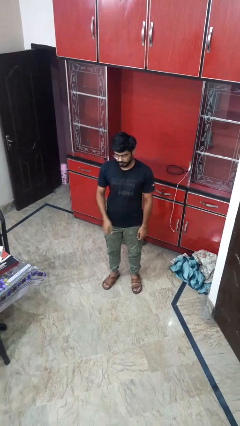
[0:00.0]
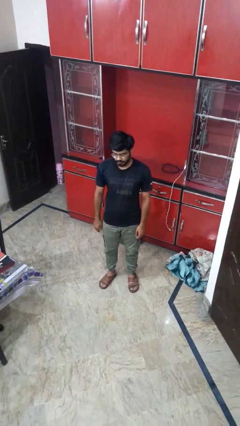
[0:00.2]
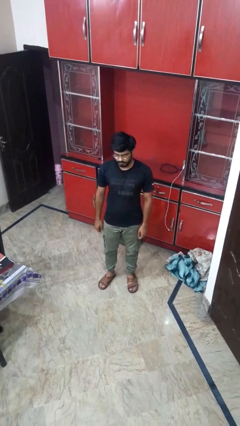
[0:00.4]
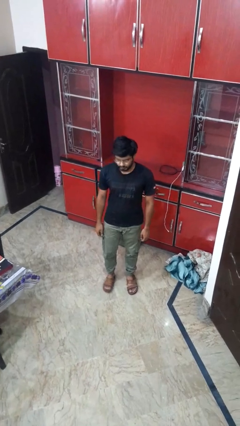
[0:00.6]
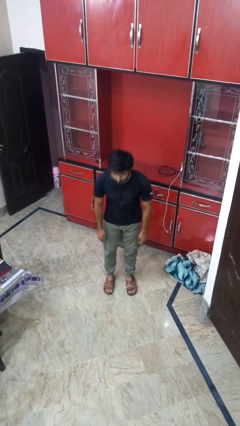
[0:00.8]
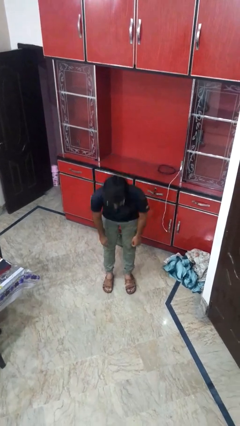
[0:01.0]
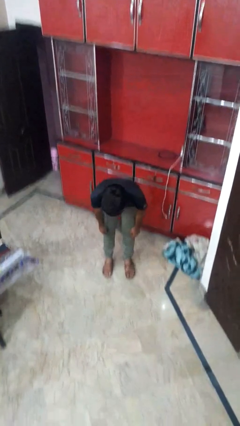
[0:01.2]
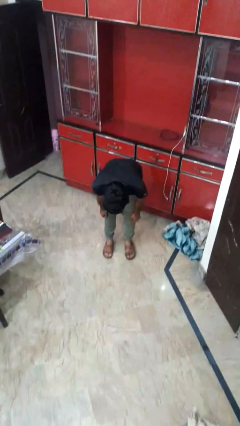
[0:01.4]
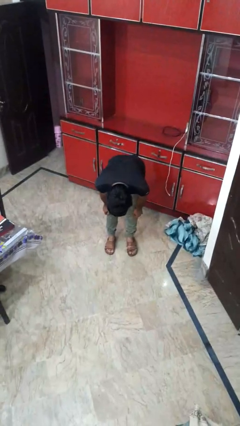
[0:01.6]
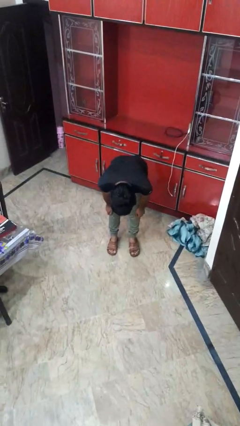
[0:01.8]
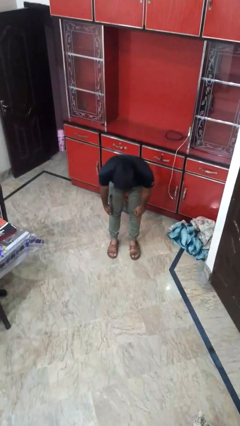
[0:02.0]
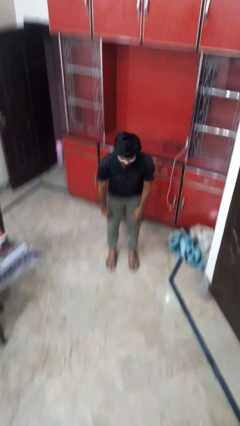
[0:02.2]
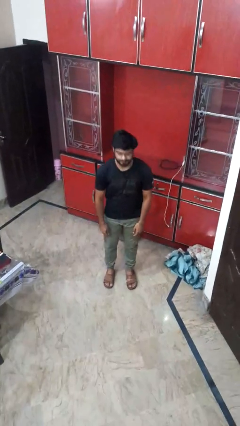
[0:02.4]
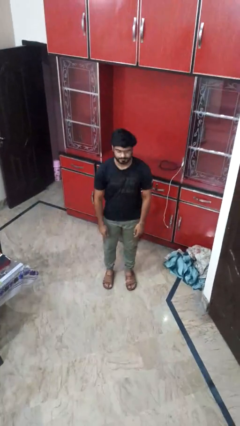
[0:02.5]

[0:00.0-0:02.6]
person bows

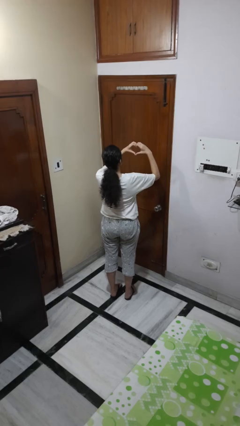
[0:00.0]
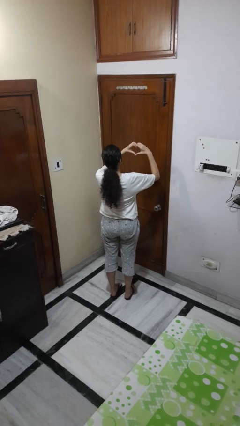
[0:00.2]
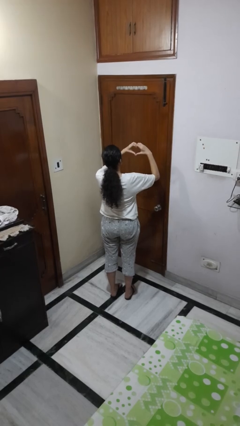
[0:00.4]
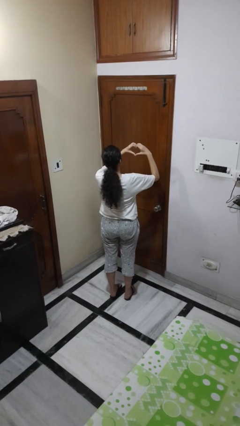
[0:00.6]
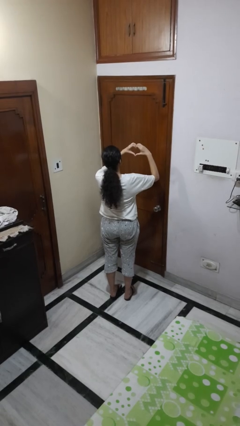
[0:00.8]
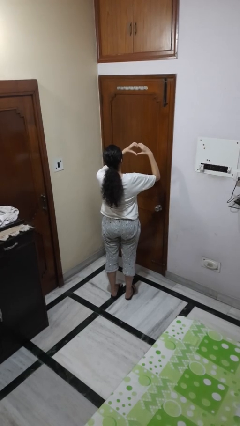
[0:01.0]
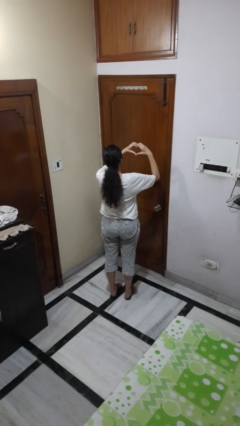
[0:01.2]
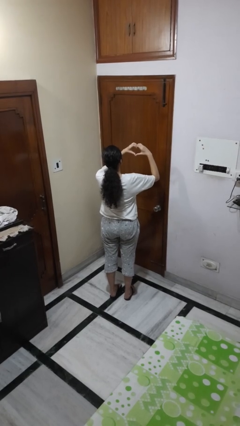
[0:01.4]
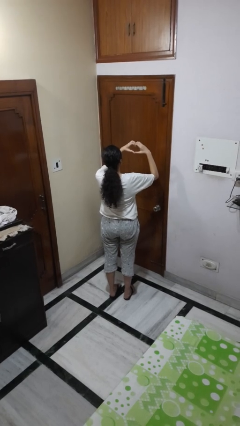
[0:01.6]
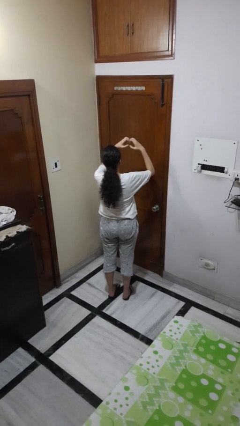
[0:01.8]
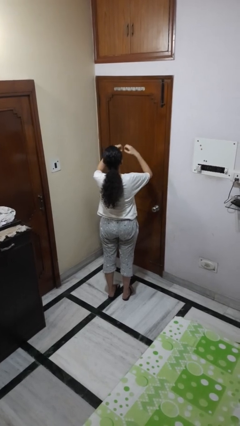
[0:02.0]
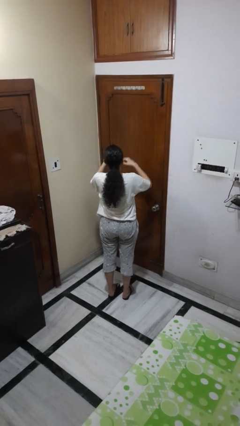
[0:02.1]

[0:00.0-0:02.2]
person gestures heart

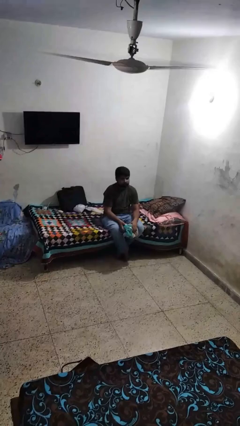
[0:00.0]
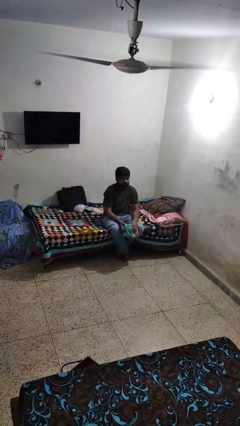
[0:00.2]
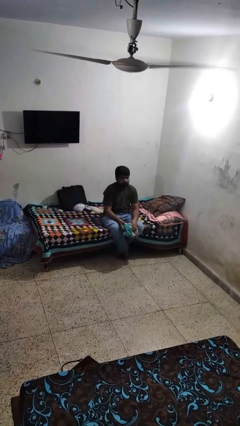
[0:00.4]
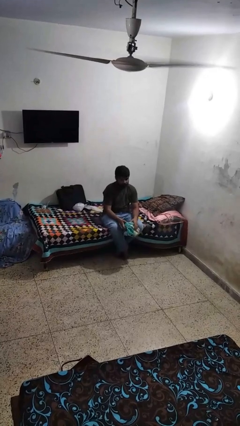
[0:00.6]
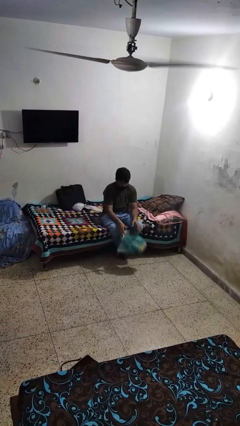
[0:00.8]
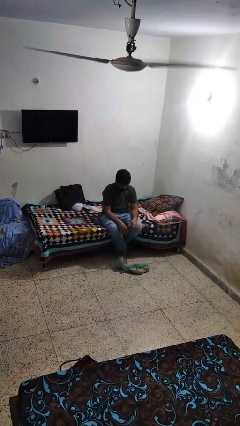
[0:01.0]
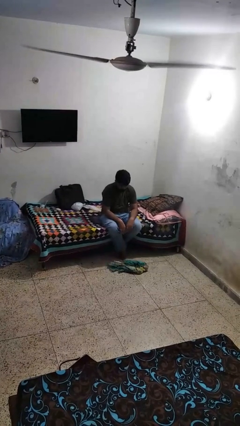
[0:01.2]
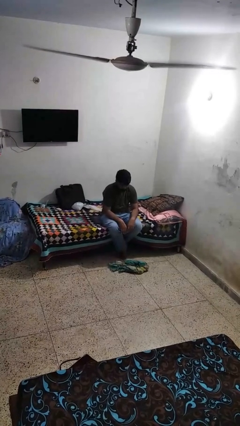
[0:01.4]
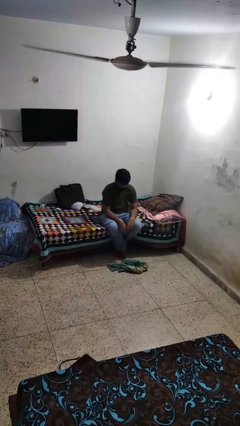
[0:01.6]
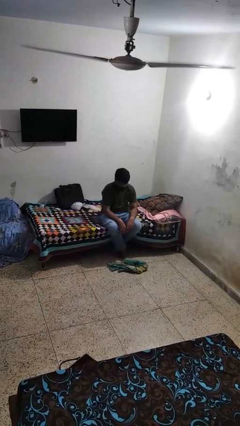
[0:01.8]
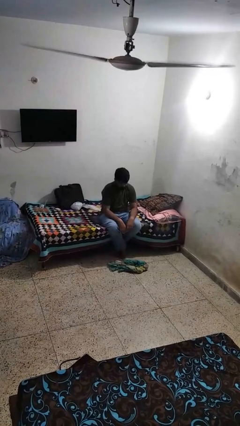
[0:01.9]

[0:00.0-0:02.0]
person drops object

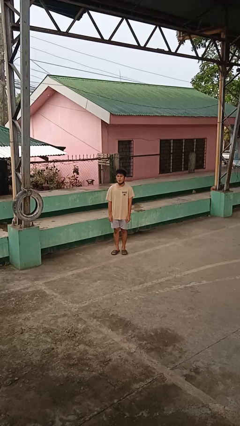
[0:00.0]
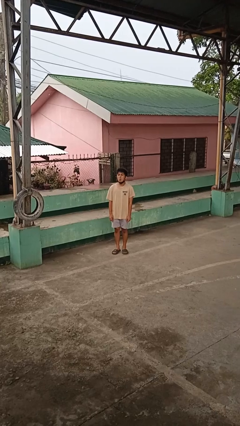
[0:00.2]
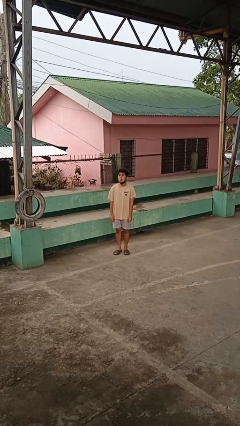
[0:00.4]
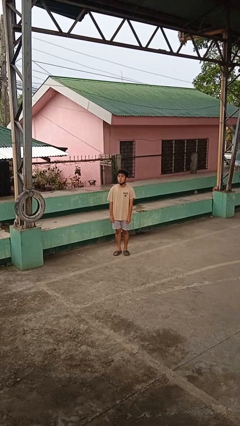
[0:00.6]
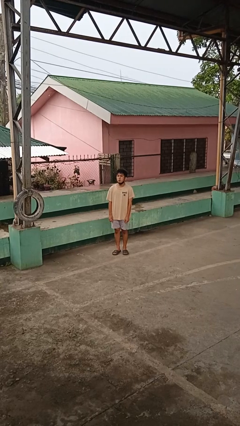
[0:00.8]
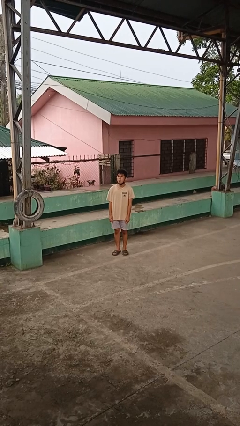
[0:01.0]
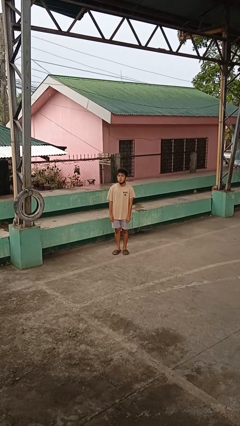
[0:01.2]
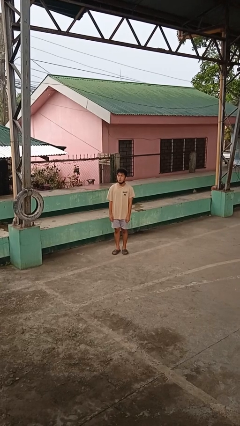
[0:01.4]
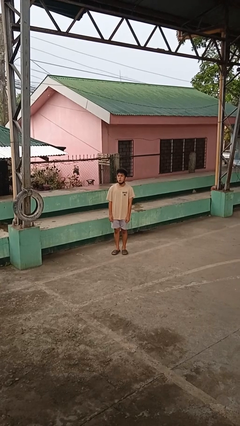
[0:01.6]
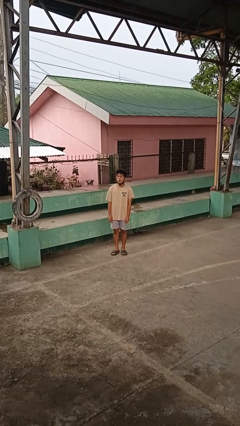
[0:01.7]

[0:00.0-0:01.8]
person sticks out tongue

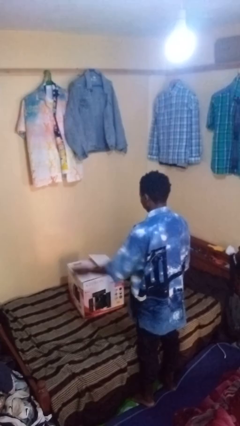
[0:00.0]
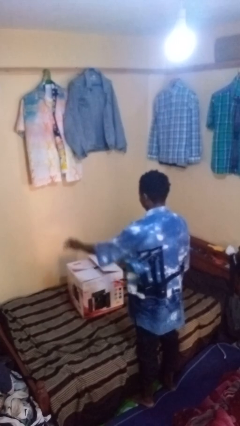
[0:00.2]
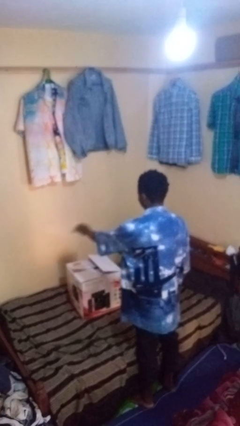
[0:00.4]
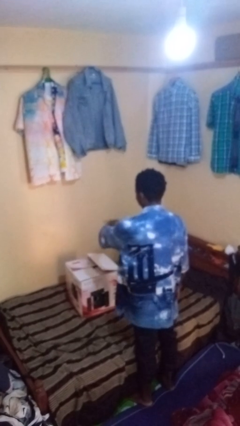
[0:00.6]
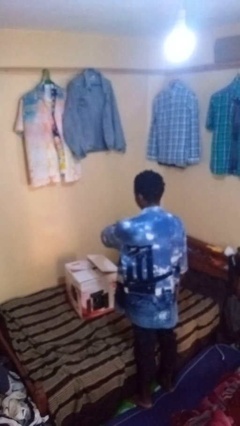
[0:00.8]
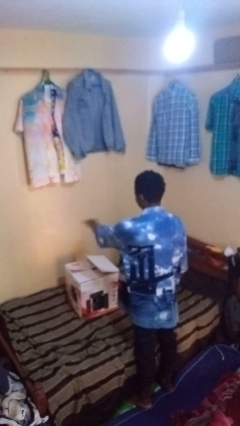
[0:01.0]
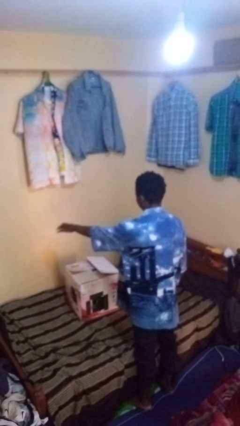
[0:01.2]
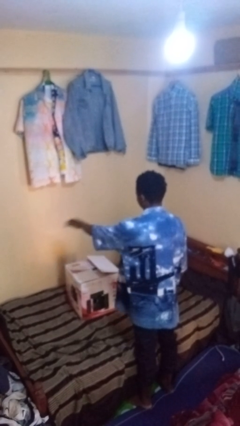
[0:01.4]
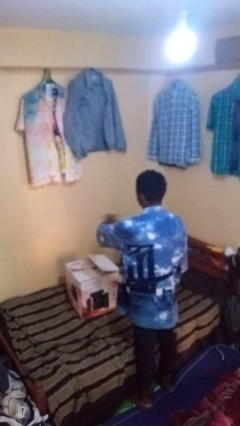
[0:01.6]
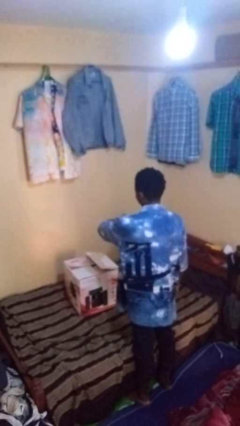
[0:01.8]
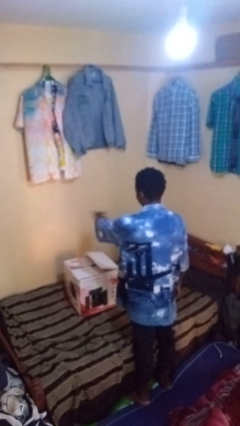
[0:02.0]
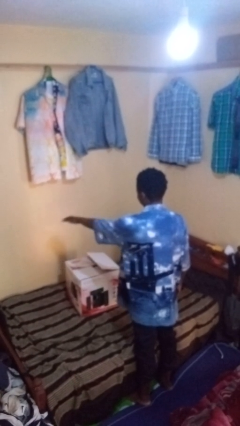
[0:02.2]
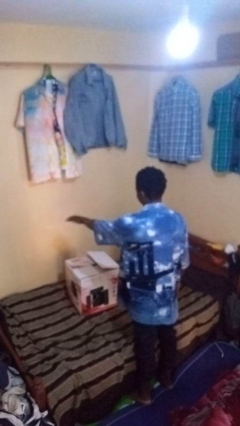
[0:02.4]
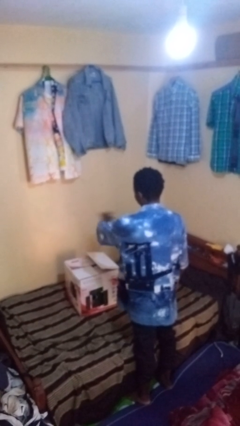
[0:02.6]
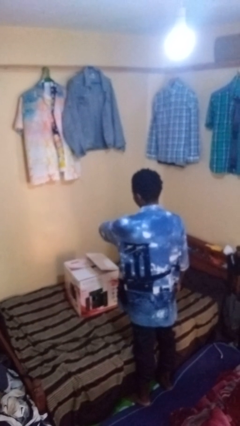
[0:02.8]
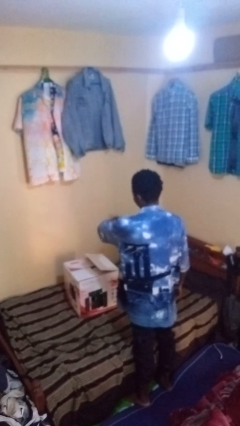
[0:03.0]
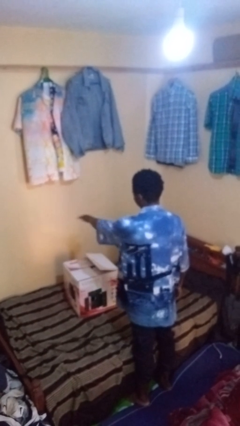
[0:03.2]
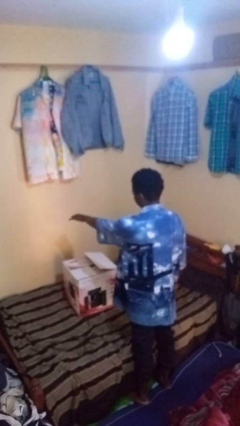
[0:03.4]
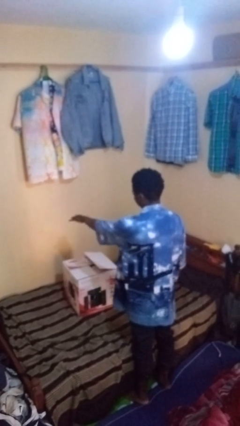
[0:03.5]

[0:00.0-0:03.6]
person waves hand over object

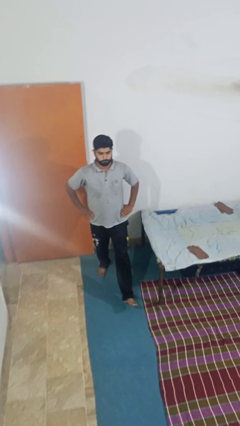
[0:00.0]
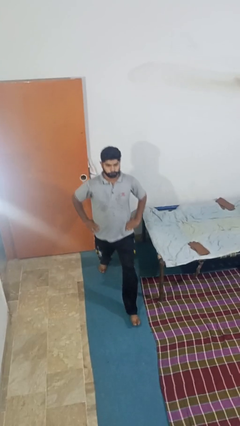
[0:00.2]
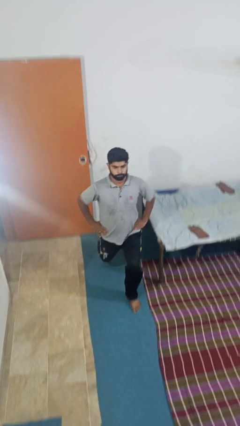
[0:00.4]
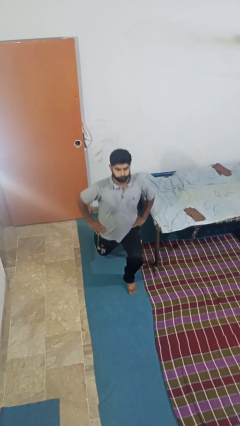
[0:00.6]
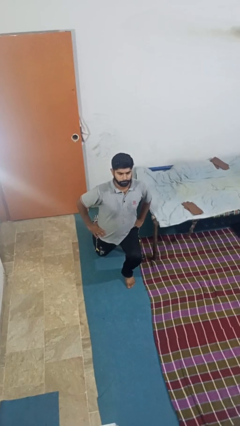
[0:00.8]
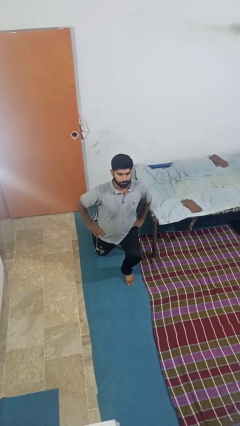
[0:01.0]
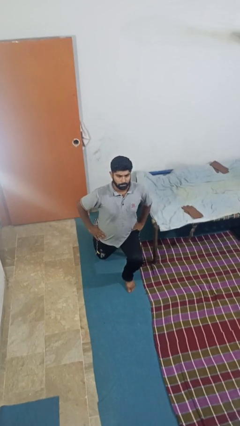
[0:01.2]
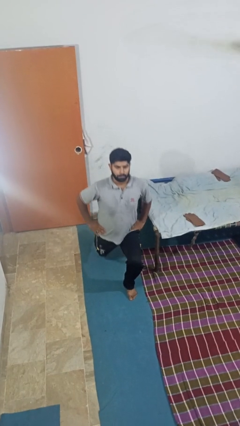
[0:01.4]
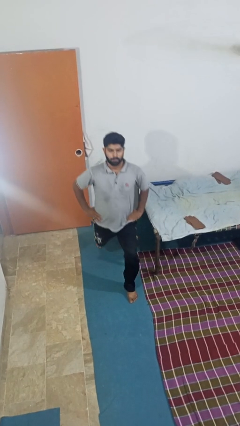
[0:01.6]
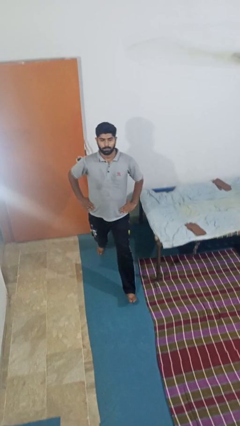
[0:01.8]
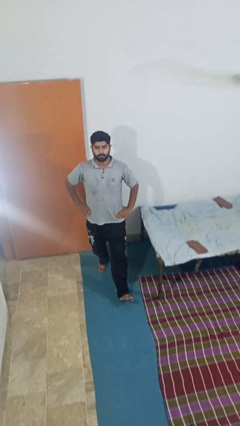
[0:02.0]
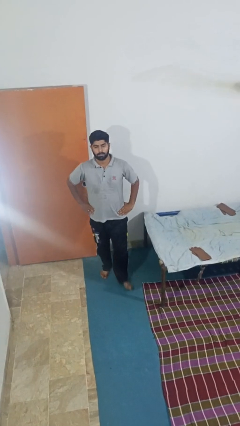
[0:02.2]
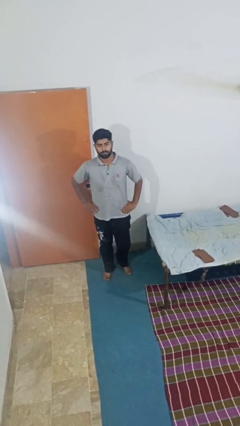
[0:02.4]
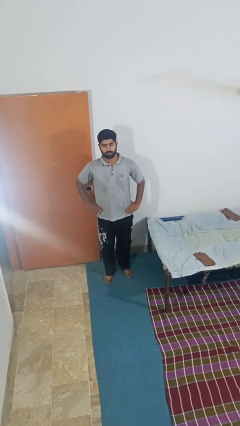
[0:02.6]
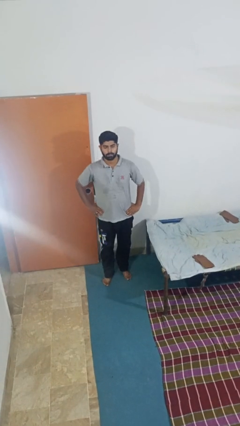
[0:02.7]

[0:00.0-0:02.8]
person exercises with lunges

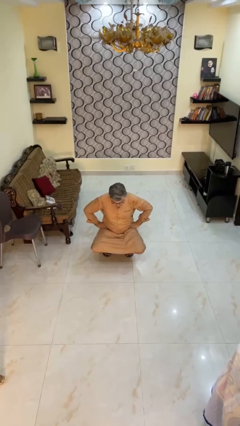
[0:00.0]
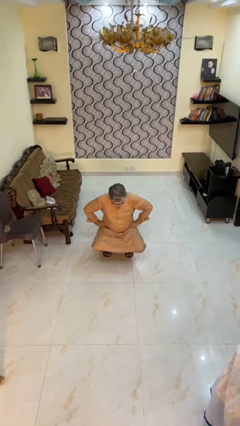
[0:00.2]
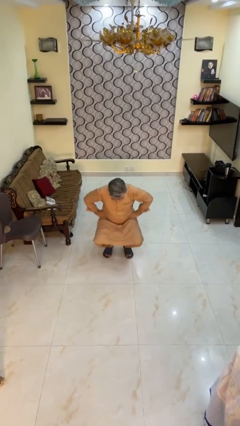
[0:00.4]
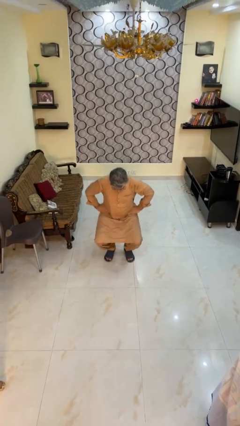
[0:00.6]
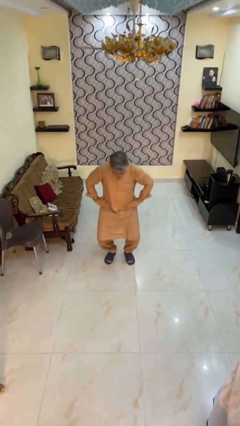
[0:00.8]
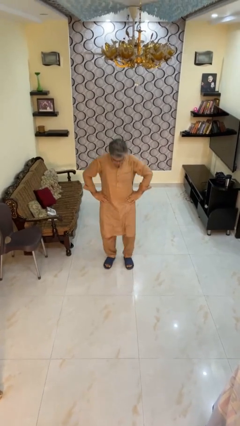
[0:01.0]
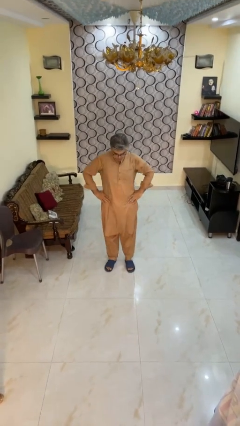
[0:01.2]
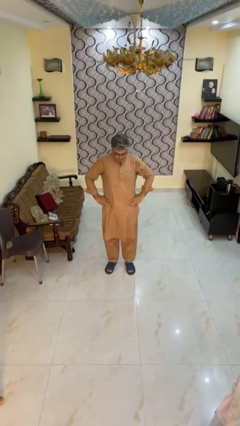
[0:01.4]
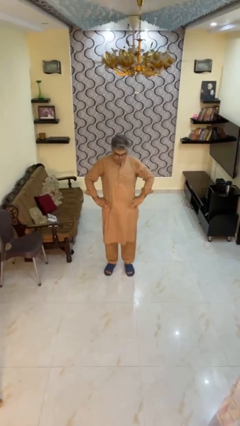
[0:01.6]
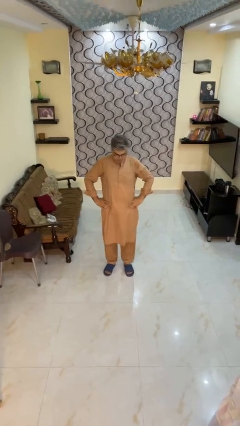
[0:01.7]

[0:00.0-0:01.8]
person stands up

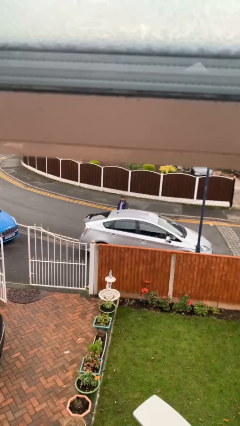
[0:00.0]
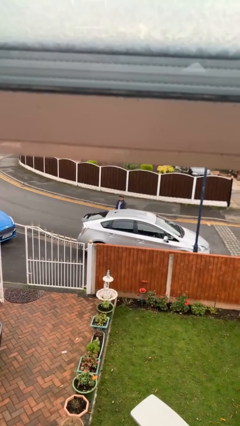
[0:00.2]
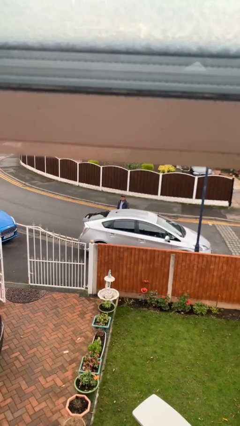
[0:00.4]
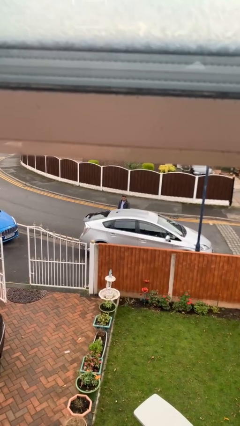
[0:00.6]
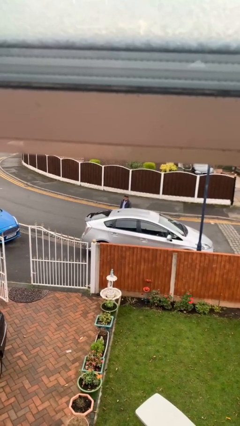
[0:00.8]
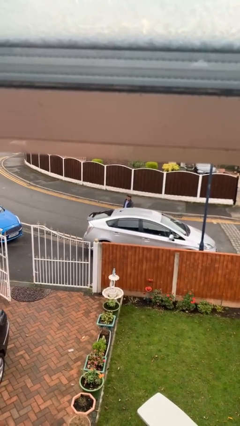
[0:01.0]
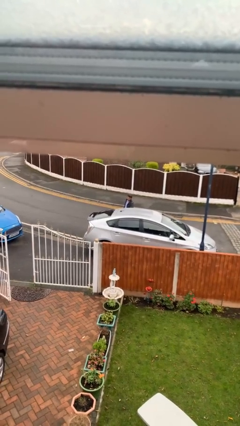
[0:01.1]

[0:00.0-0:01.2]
person closes car door
